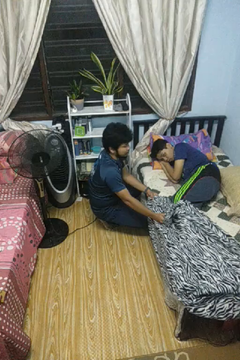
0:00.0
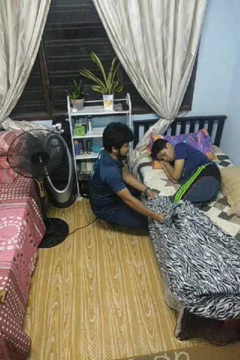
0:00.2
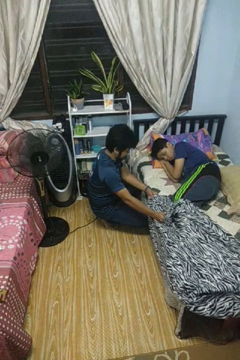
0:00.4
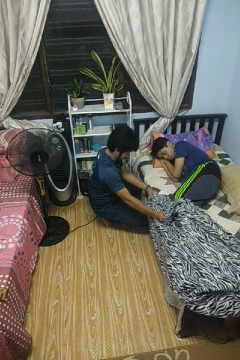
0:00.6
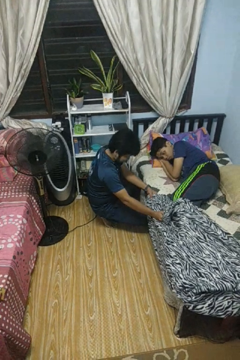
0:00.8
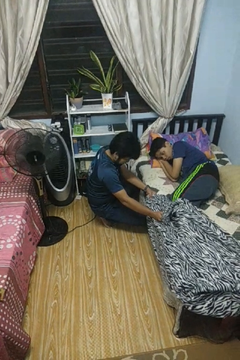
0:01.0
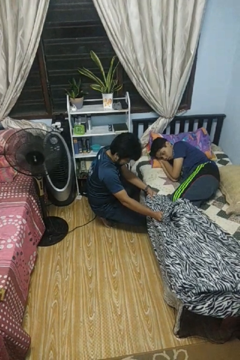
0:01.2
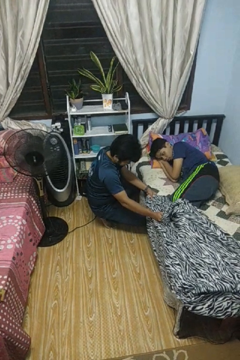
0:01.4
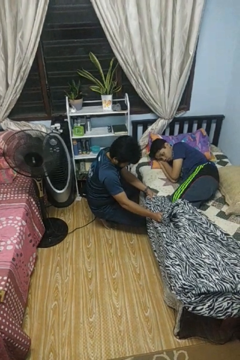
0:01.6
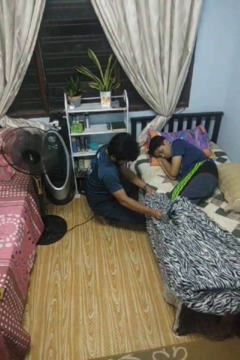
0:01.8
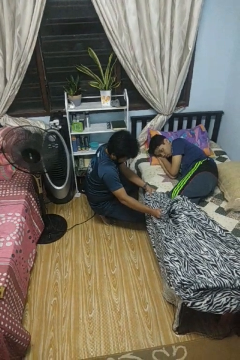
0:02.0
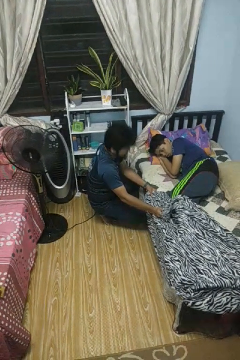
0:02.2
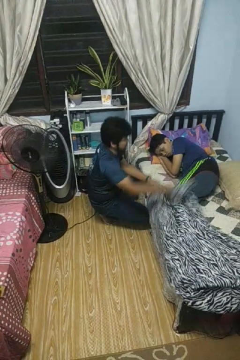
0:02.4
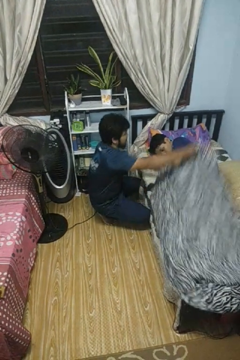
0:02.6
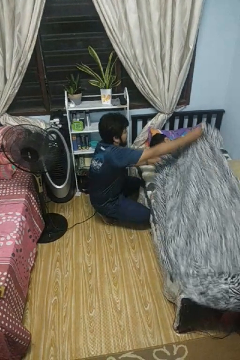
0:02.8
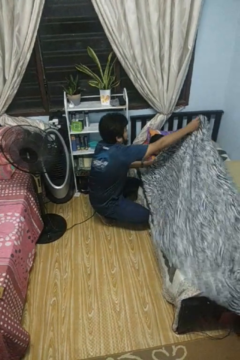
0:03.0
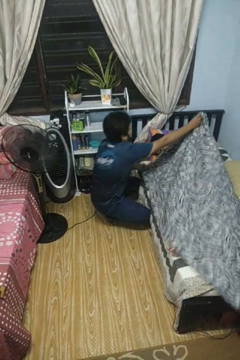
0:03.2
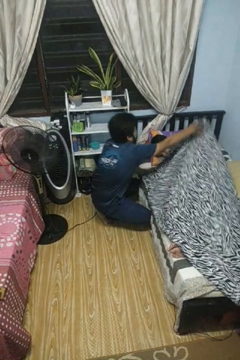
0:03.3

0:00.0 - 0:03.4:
person covers friend with blanket

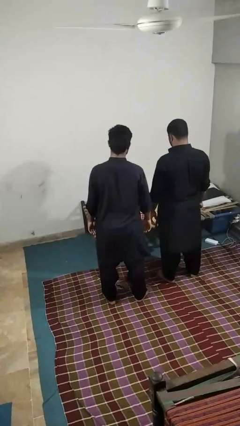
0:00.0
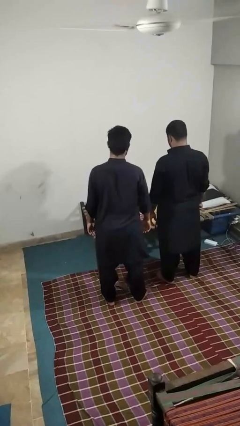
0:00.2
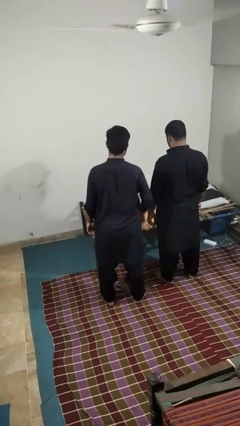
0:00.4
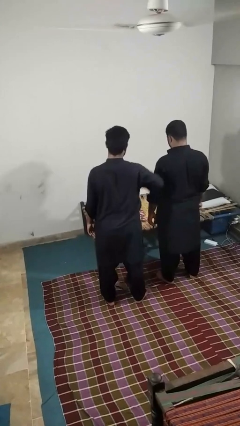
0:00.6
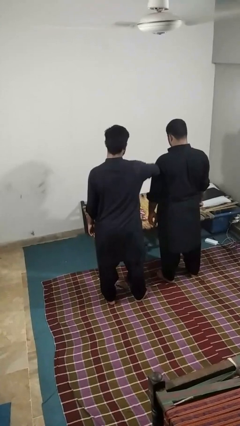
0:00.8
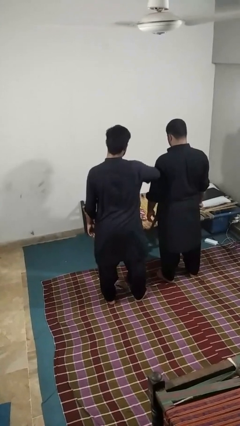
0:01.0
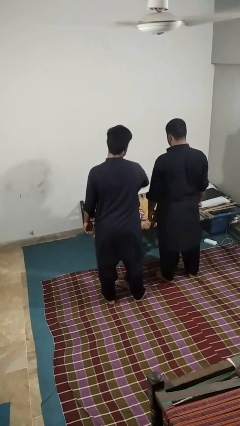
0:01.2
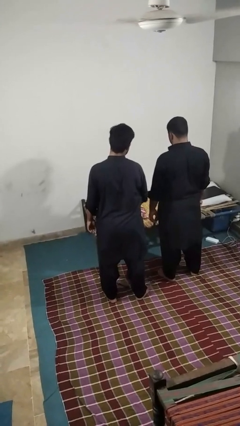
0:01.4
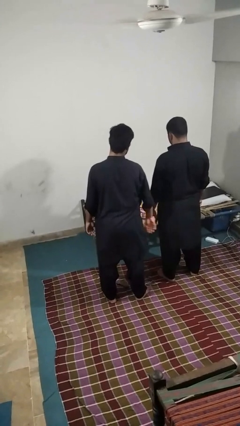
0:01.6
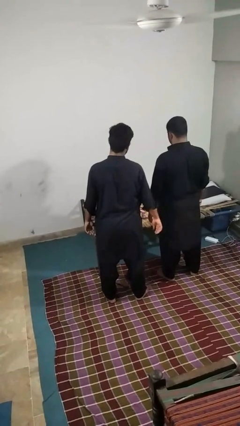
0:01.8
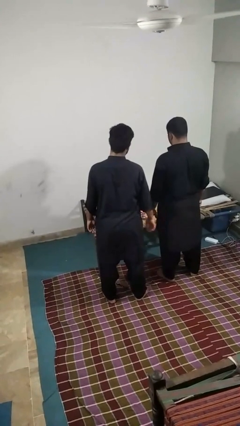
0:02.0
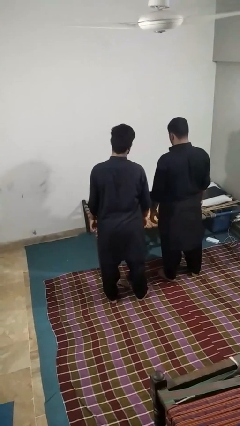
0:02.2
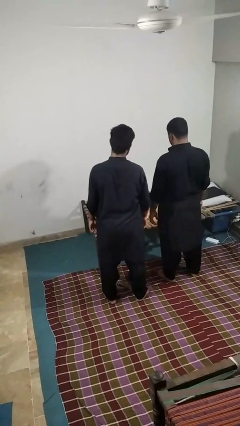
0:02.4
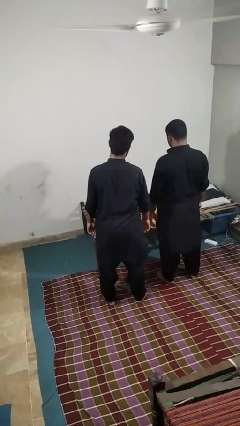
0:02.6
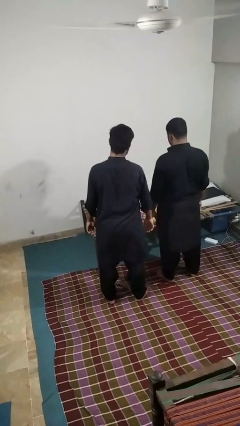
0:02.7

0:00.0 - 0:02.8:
person nudges person with elbow

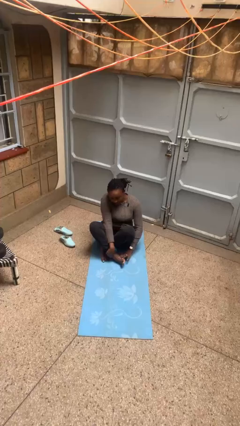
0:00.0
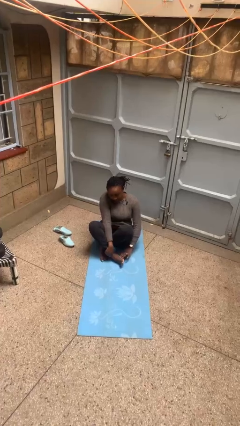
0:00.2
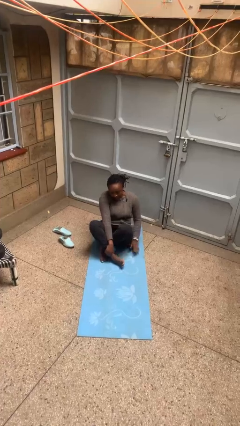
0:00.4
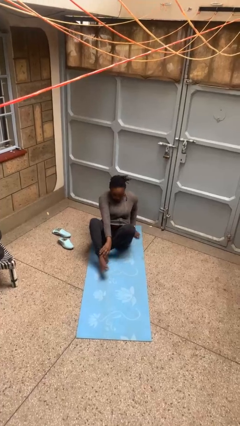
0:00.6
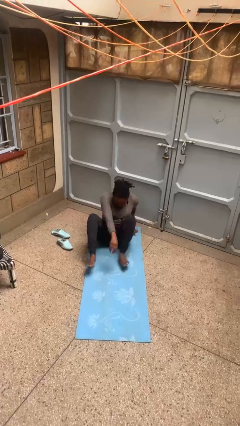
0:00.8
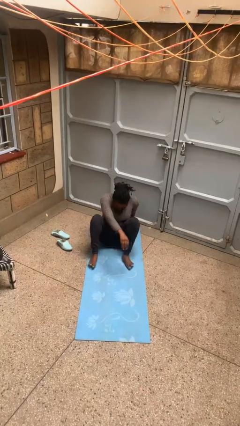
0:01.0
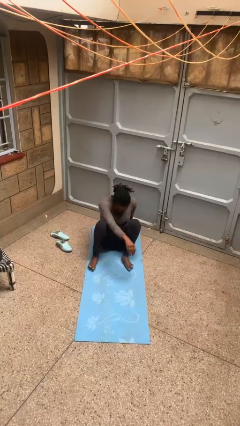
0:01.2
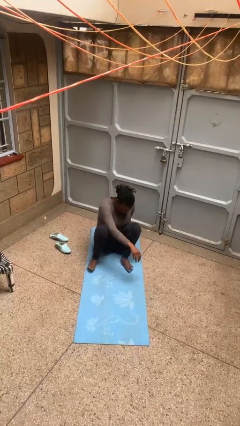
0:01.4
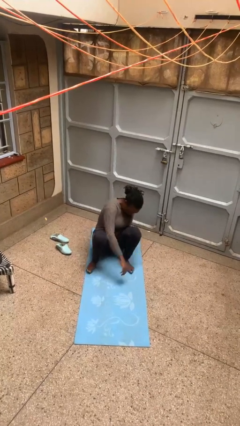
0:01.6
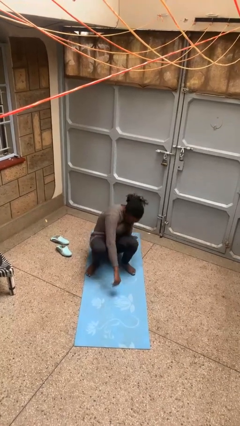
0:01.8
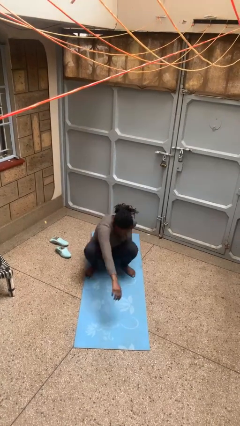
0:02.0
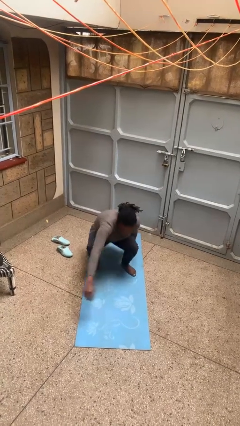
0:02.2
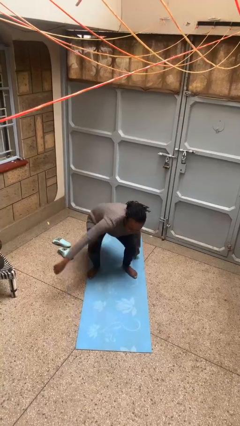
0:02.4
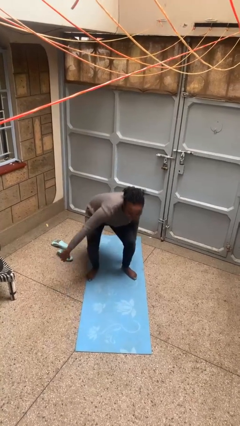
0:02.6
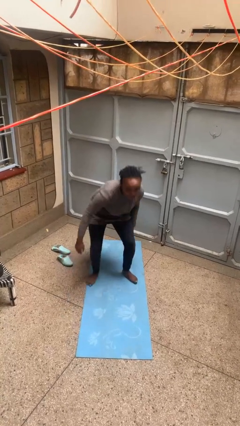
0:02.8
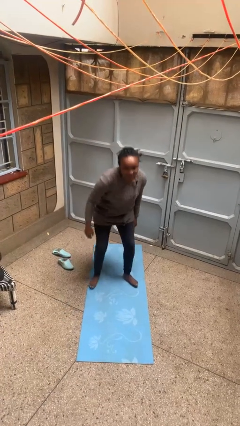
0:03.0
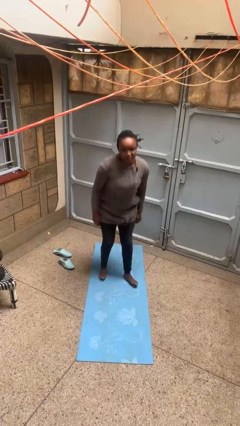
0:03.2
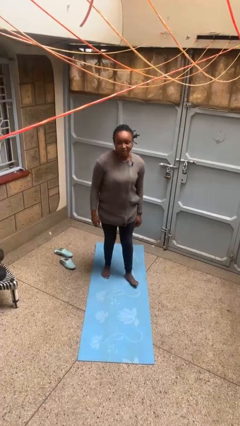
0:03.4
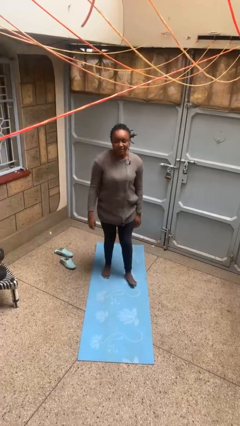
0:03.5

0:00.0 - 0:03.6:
person stands up from floor

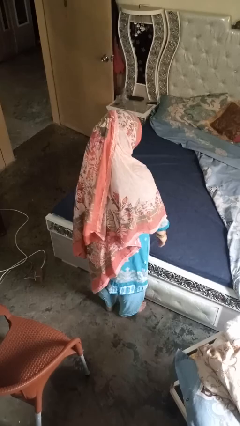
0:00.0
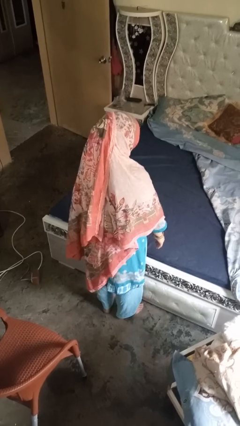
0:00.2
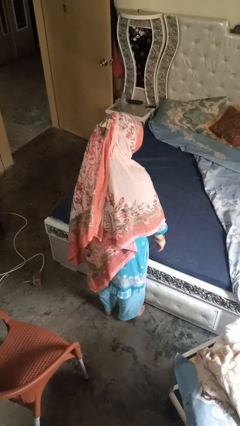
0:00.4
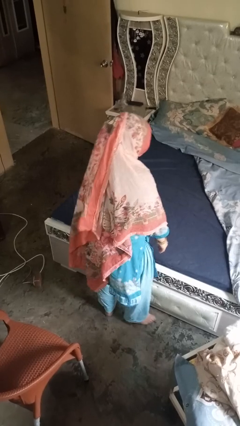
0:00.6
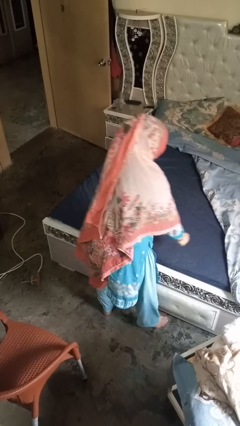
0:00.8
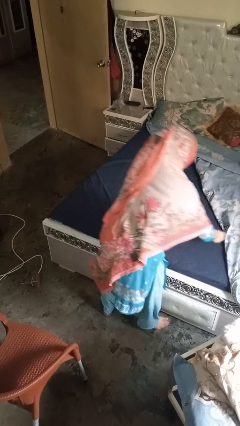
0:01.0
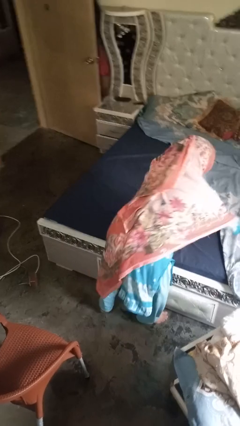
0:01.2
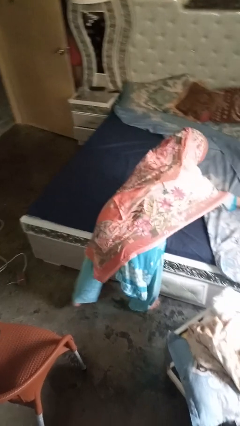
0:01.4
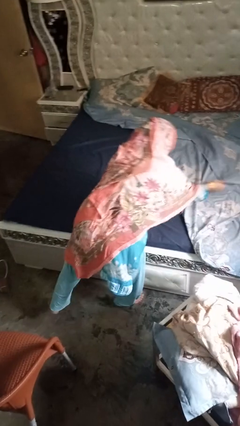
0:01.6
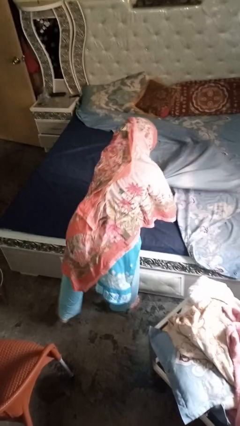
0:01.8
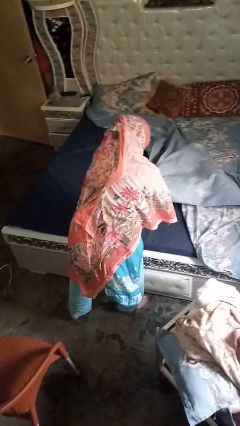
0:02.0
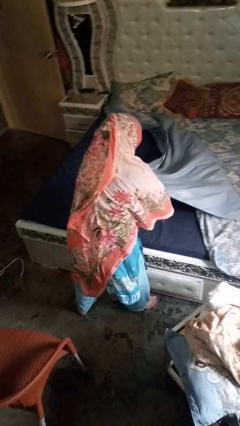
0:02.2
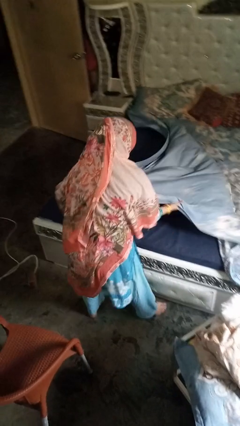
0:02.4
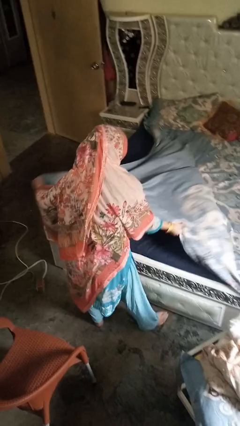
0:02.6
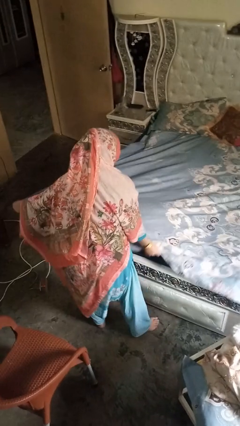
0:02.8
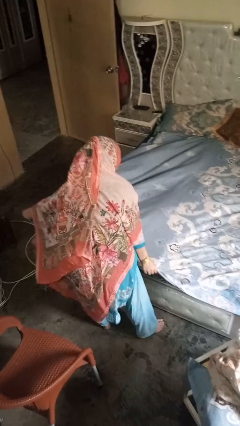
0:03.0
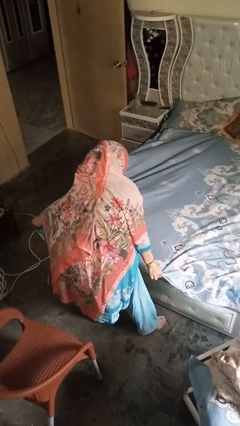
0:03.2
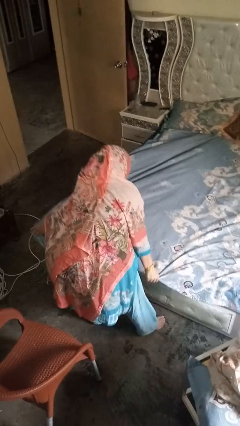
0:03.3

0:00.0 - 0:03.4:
person makes bed

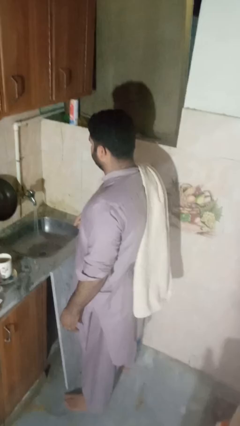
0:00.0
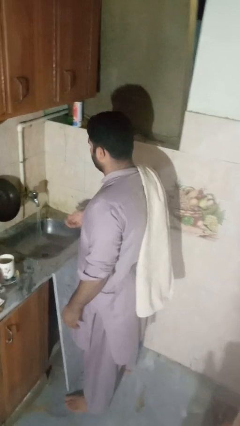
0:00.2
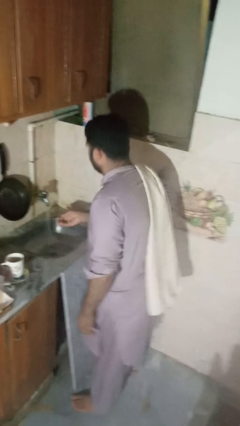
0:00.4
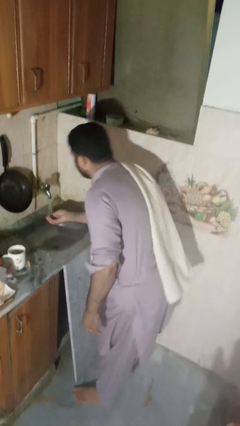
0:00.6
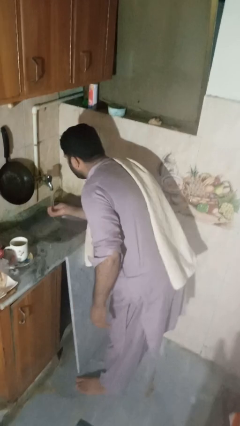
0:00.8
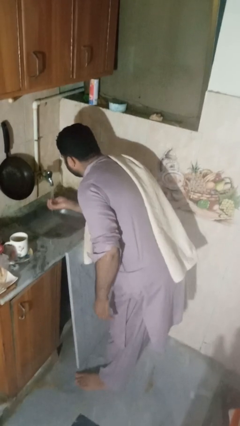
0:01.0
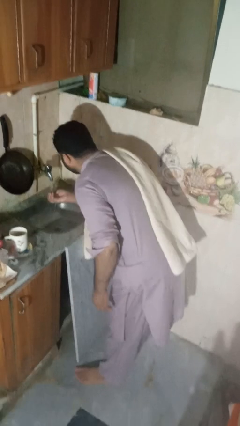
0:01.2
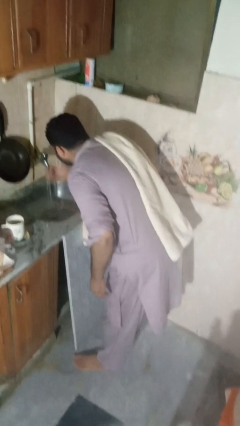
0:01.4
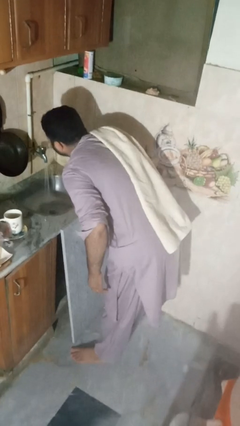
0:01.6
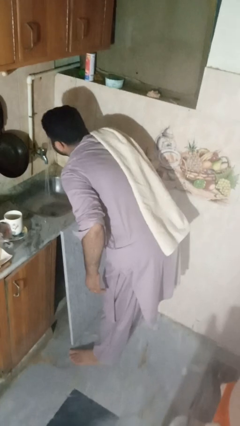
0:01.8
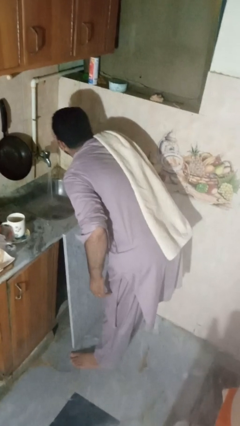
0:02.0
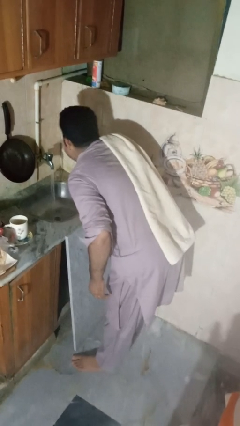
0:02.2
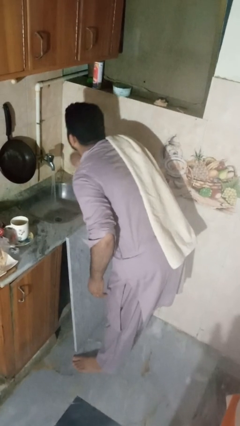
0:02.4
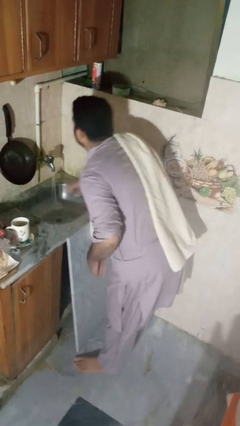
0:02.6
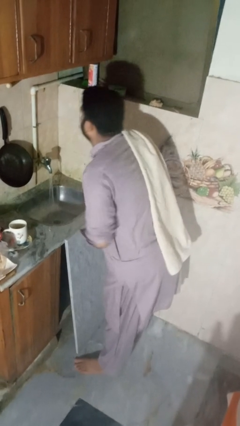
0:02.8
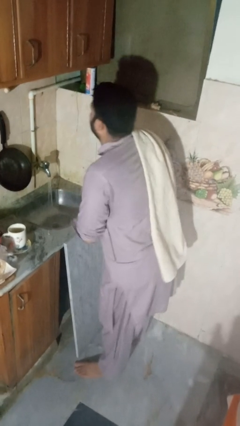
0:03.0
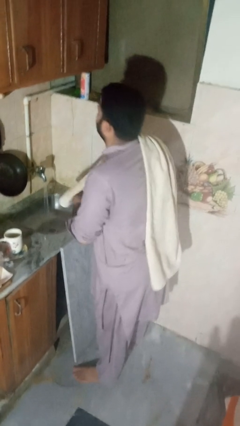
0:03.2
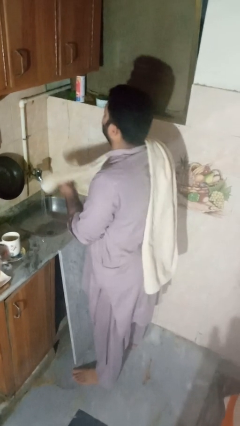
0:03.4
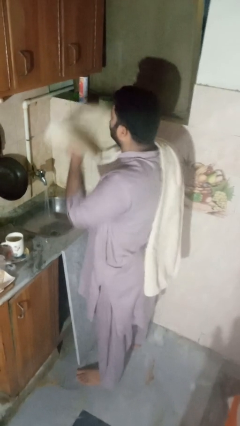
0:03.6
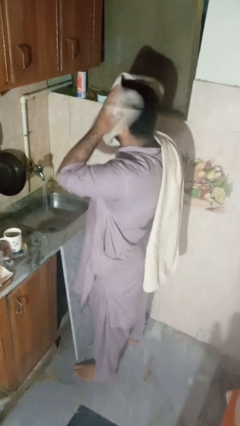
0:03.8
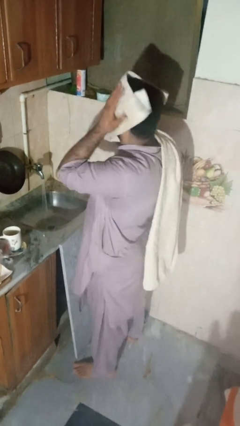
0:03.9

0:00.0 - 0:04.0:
person washes face

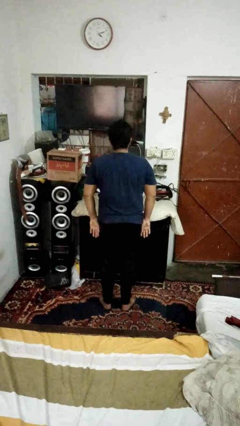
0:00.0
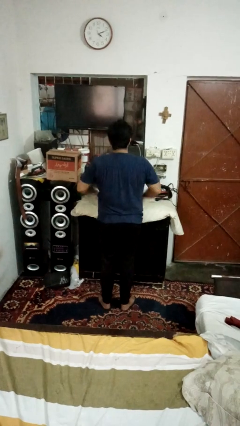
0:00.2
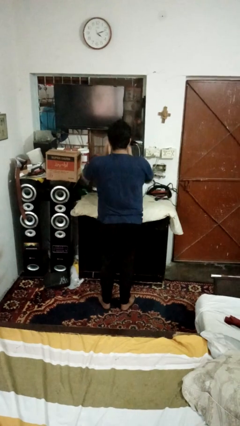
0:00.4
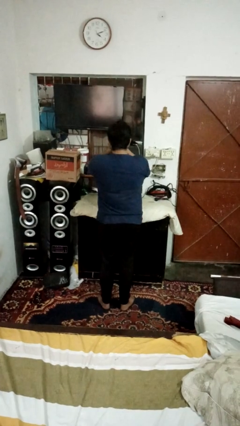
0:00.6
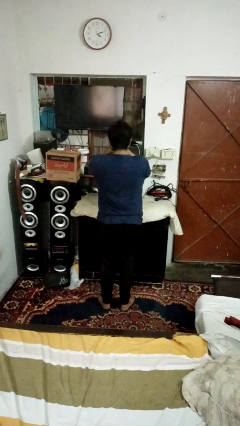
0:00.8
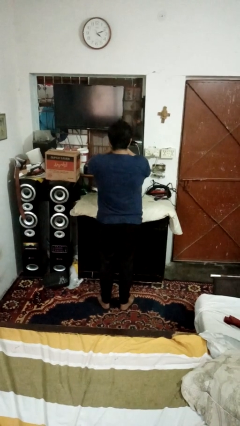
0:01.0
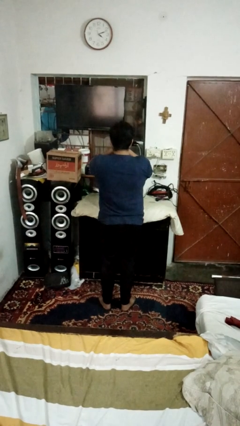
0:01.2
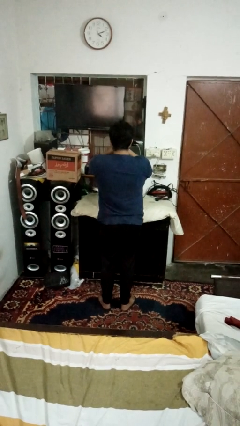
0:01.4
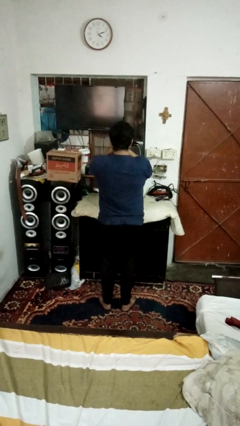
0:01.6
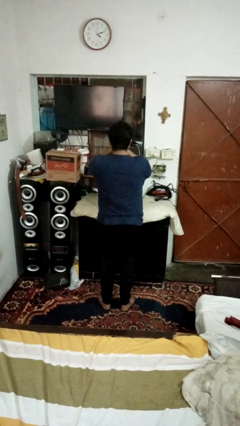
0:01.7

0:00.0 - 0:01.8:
person covers face with hands
